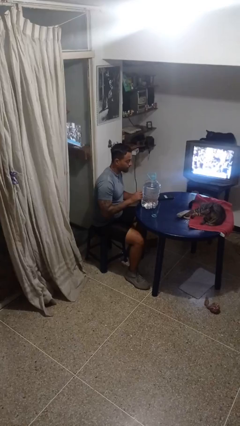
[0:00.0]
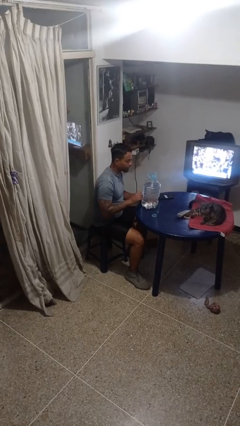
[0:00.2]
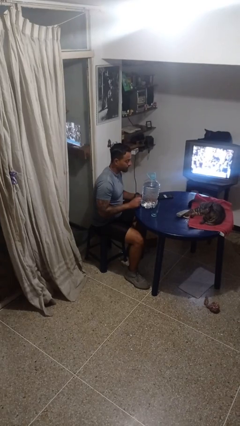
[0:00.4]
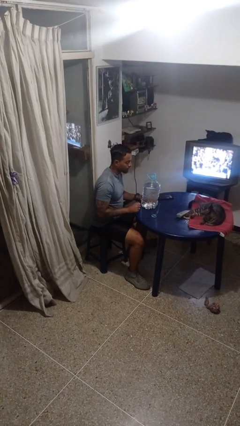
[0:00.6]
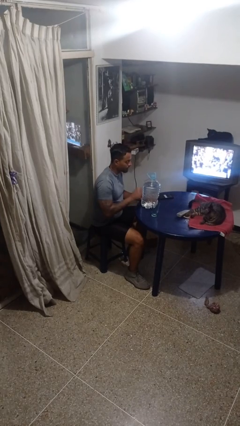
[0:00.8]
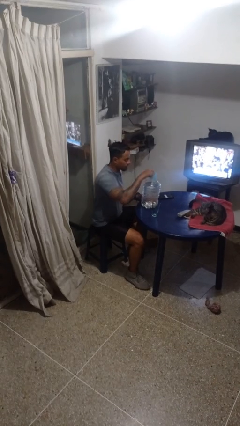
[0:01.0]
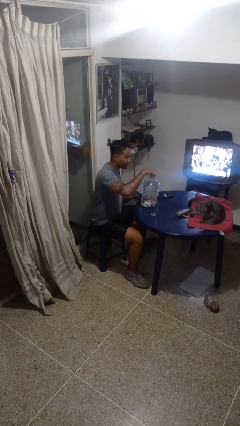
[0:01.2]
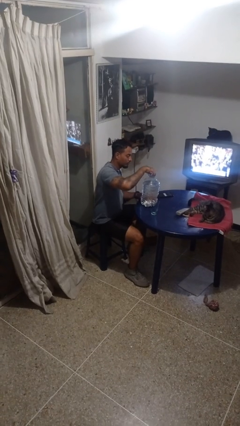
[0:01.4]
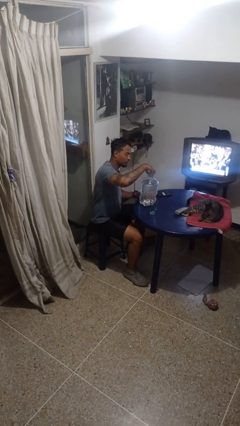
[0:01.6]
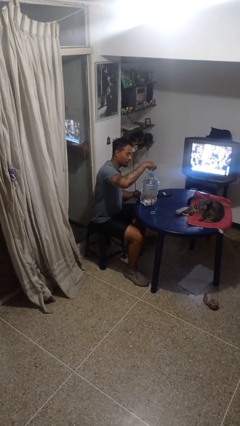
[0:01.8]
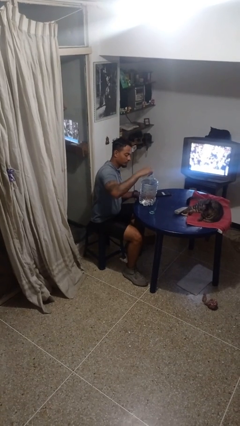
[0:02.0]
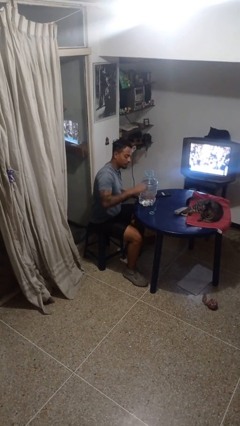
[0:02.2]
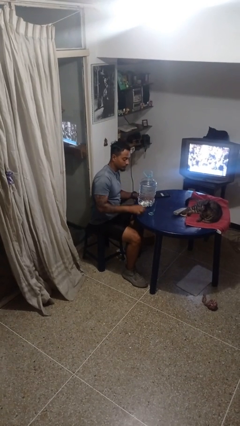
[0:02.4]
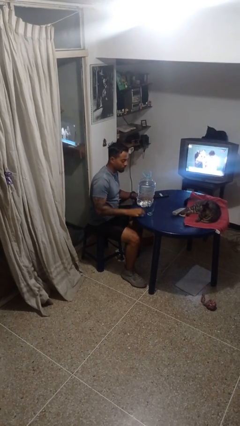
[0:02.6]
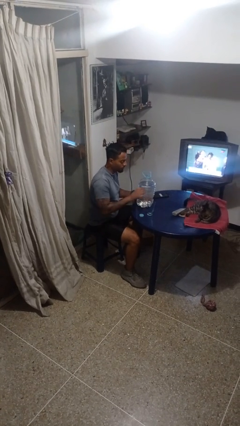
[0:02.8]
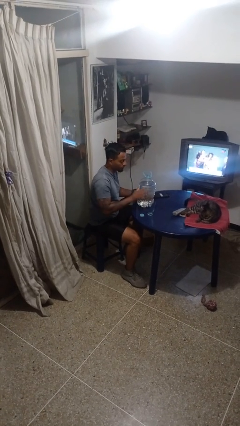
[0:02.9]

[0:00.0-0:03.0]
person unscrews lid from bottle

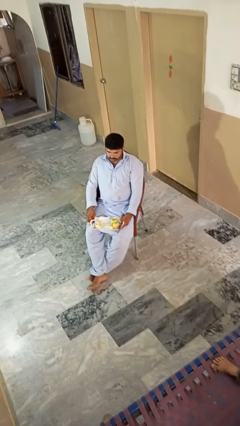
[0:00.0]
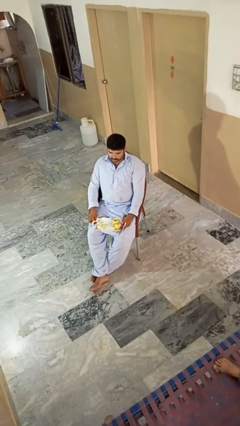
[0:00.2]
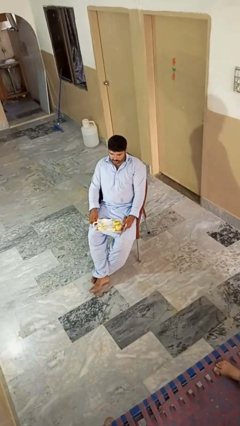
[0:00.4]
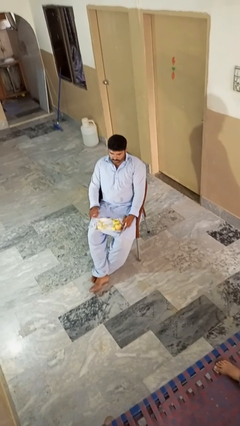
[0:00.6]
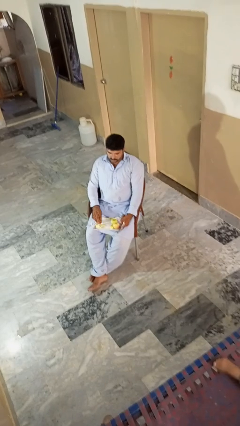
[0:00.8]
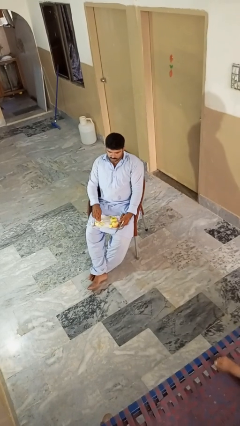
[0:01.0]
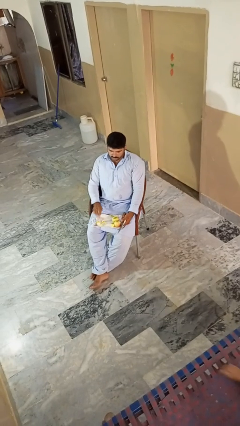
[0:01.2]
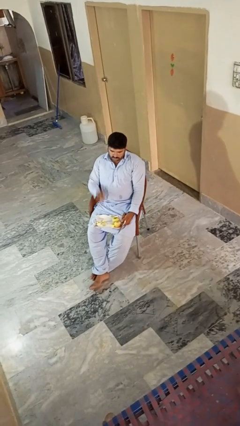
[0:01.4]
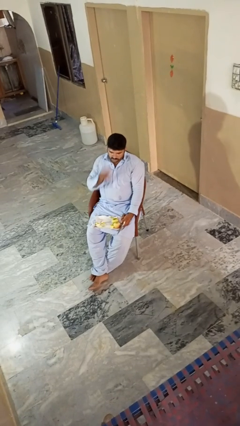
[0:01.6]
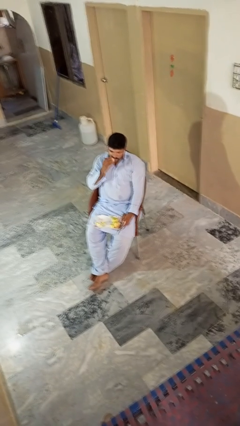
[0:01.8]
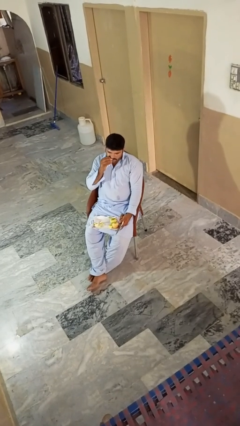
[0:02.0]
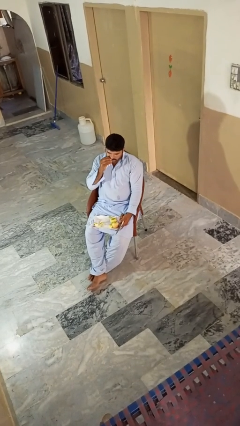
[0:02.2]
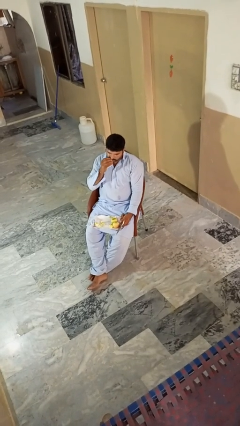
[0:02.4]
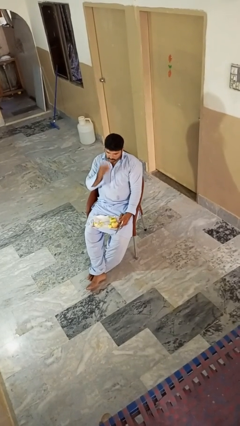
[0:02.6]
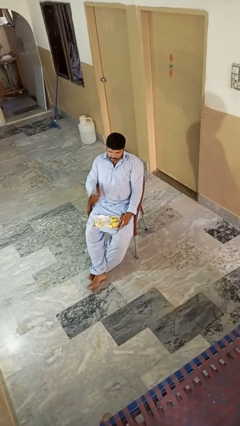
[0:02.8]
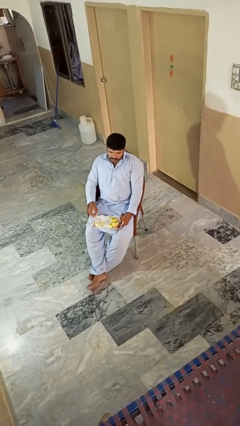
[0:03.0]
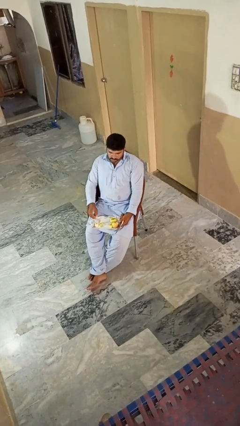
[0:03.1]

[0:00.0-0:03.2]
person eats apple

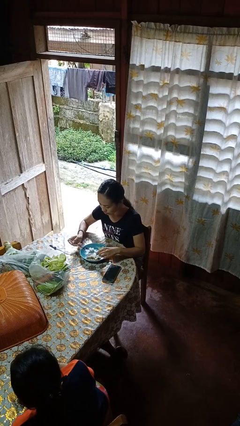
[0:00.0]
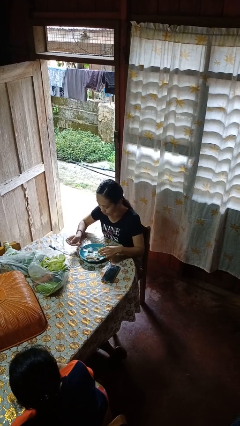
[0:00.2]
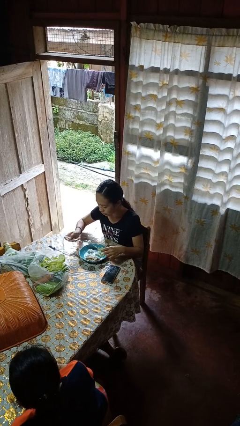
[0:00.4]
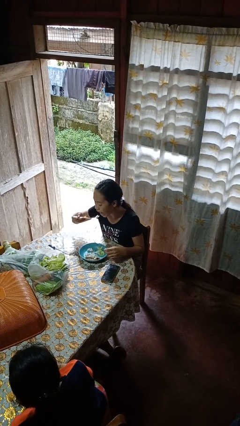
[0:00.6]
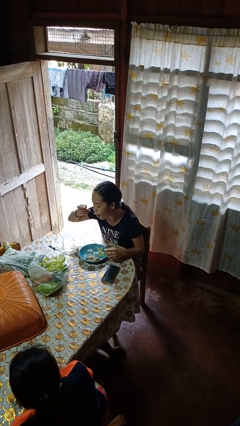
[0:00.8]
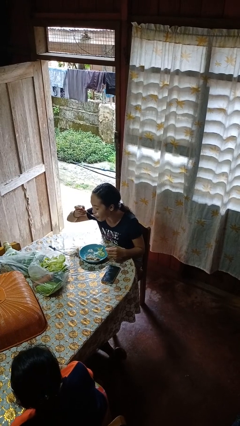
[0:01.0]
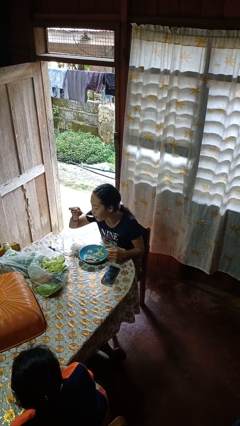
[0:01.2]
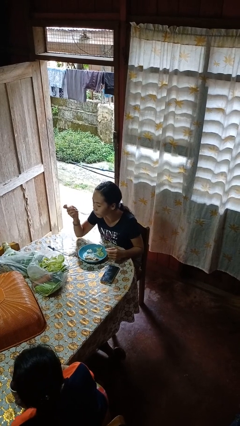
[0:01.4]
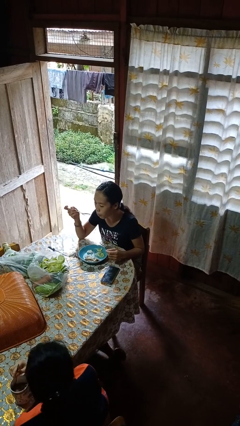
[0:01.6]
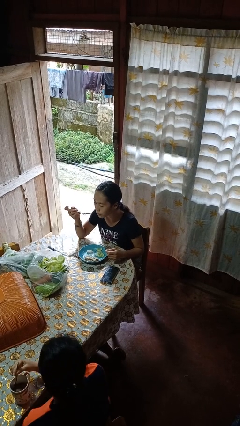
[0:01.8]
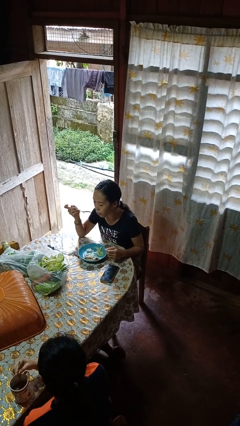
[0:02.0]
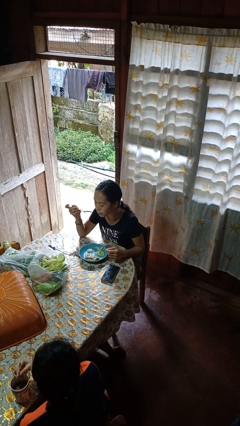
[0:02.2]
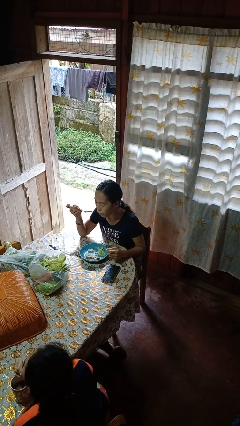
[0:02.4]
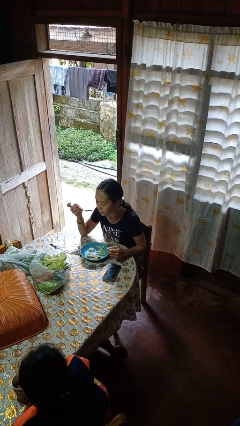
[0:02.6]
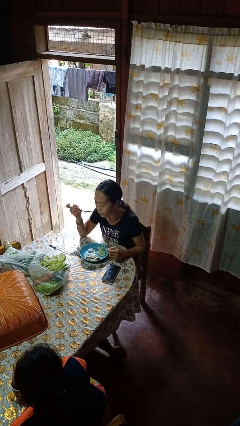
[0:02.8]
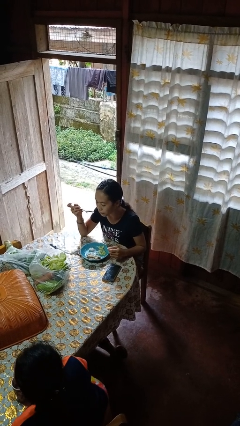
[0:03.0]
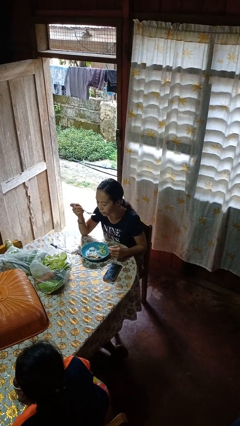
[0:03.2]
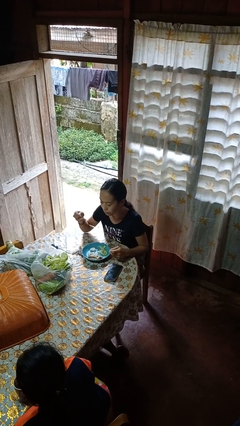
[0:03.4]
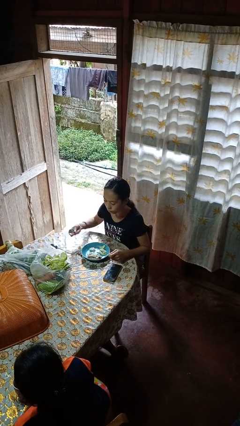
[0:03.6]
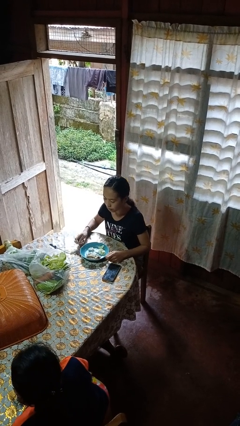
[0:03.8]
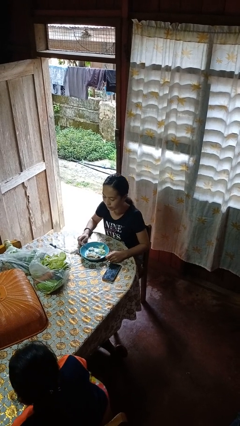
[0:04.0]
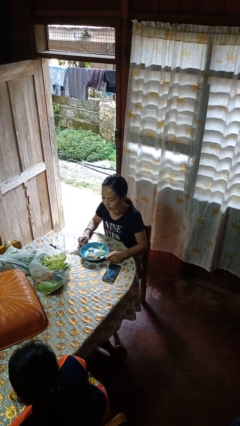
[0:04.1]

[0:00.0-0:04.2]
person eats with utensil

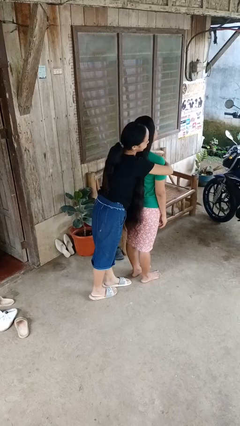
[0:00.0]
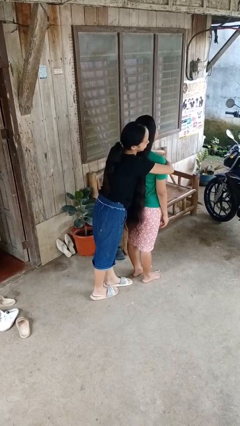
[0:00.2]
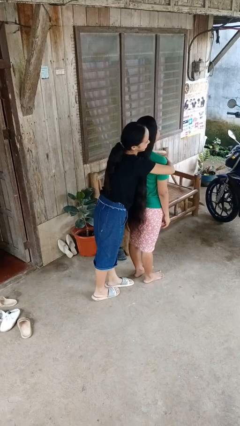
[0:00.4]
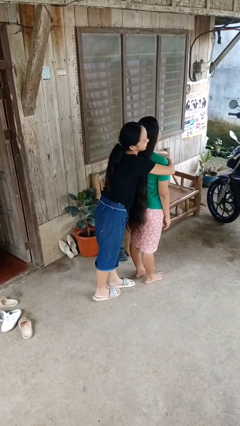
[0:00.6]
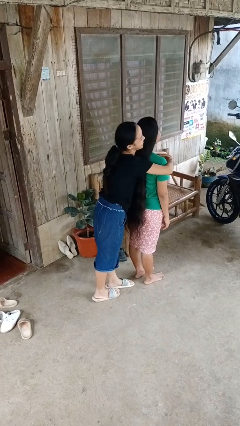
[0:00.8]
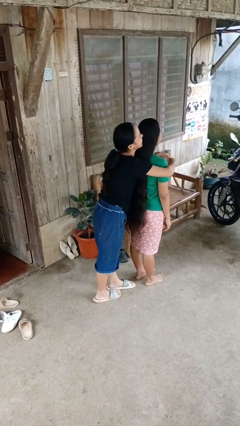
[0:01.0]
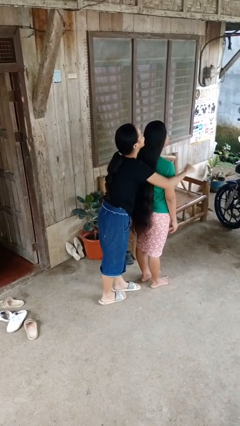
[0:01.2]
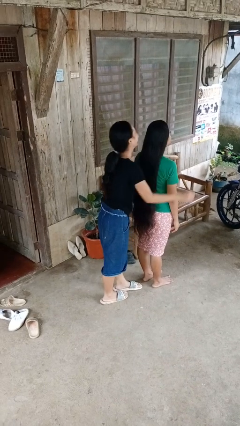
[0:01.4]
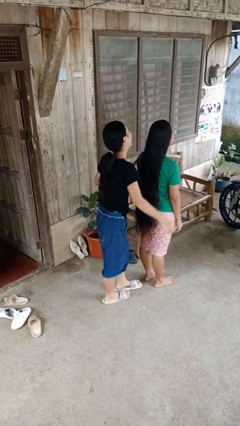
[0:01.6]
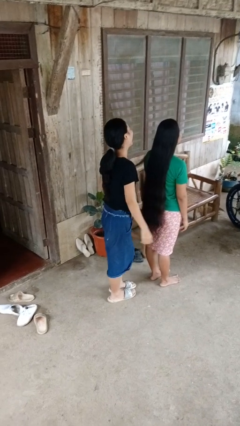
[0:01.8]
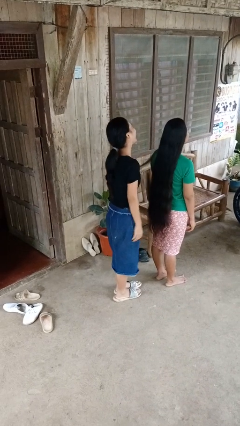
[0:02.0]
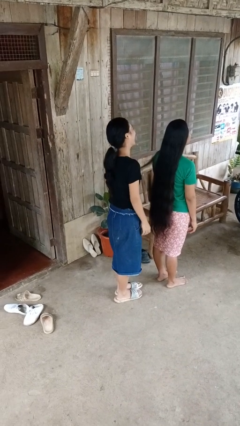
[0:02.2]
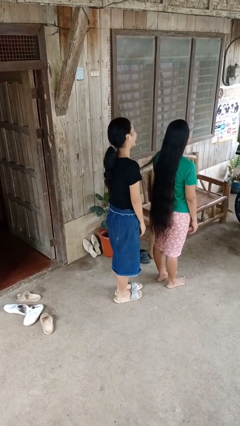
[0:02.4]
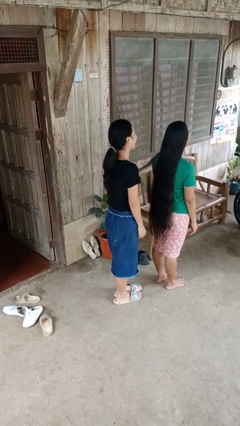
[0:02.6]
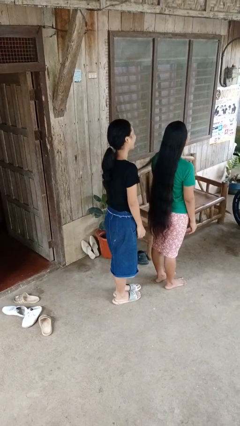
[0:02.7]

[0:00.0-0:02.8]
person hugs person from behind

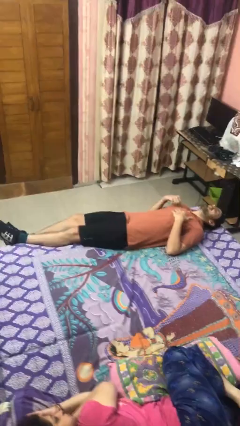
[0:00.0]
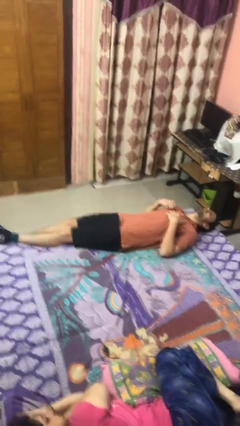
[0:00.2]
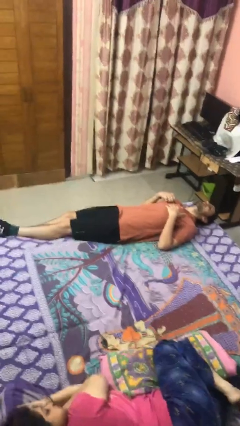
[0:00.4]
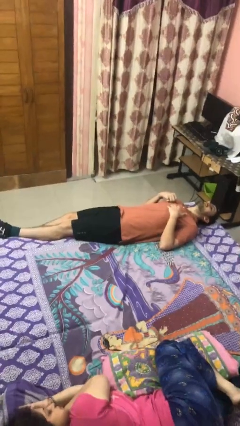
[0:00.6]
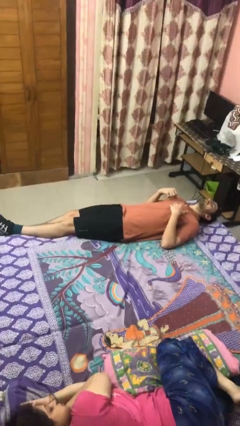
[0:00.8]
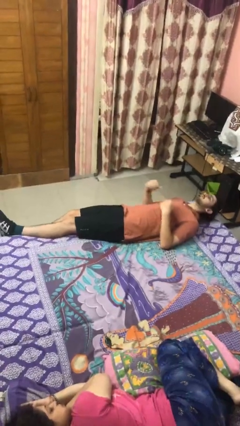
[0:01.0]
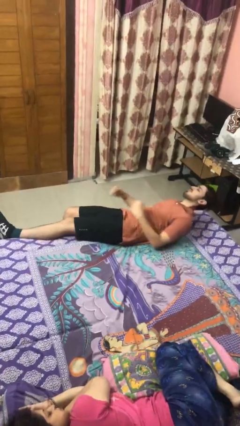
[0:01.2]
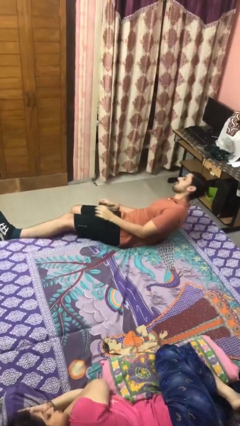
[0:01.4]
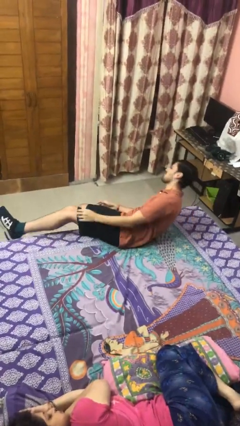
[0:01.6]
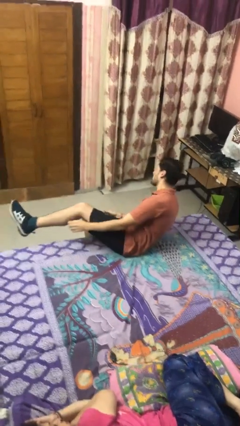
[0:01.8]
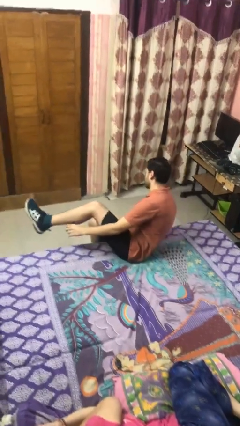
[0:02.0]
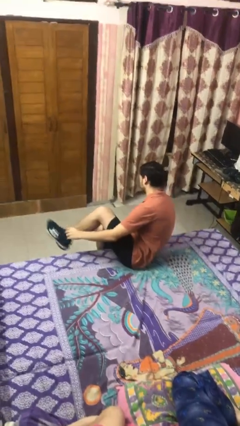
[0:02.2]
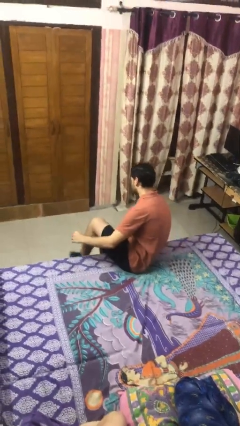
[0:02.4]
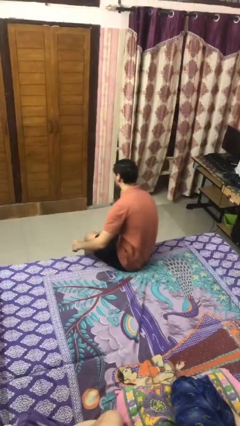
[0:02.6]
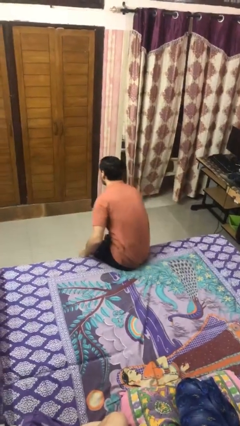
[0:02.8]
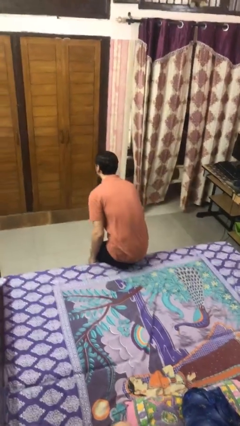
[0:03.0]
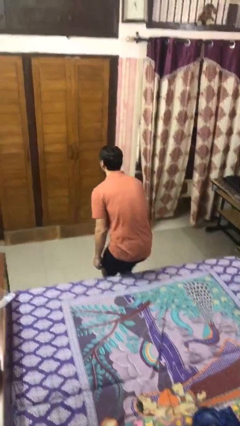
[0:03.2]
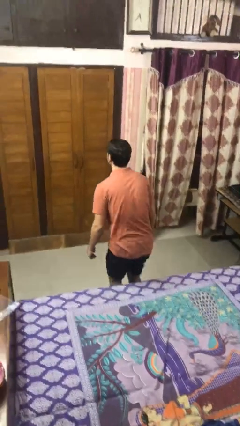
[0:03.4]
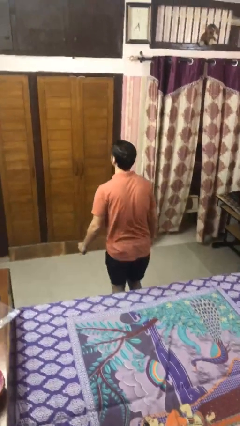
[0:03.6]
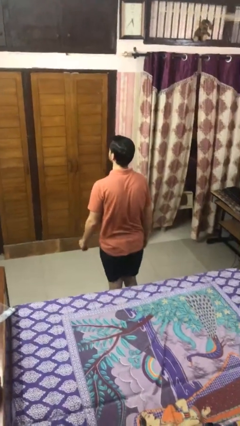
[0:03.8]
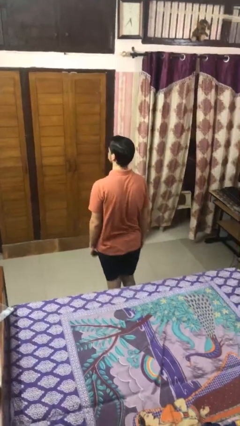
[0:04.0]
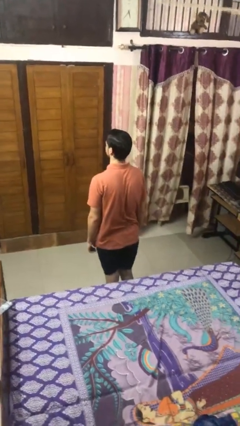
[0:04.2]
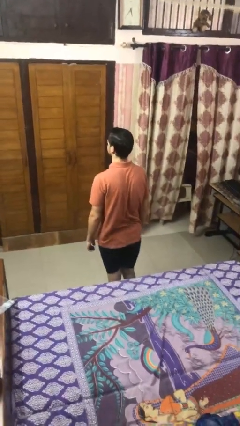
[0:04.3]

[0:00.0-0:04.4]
person stands up
